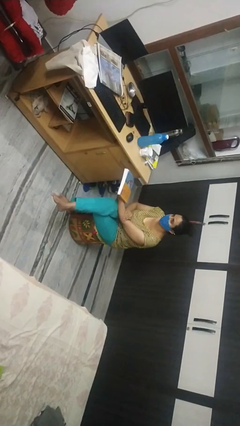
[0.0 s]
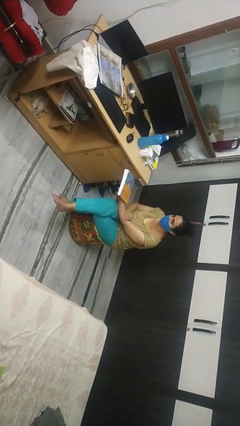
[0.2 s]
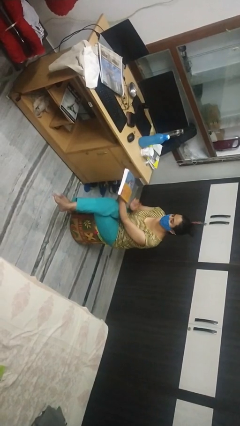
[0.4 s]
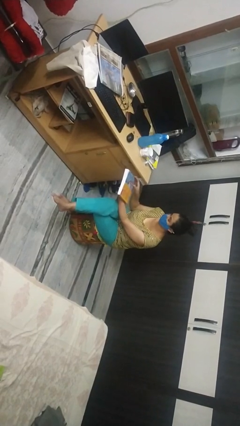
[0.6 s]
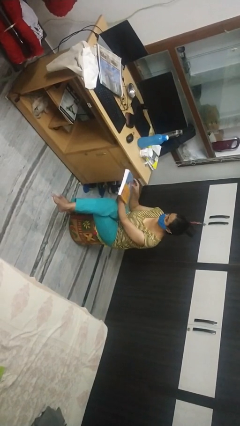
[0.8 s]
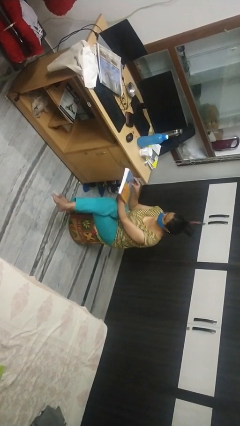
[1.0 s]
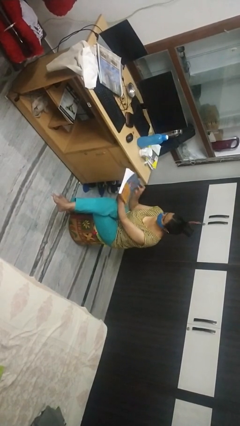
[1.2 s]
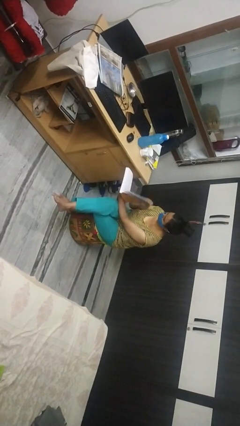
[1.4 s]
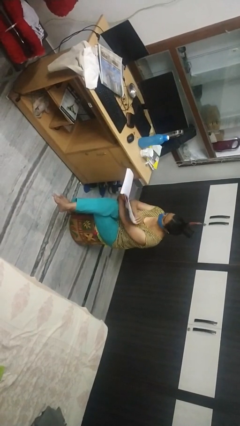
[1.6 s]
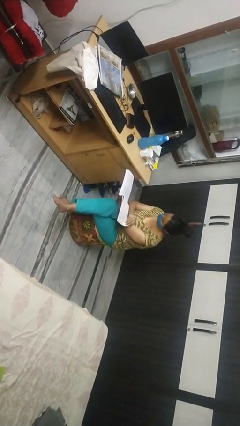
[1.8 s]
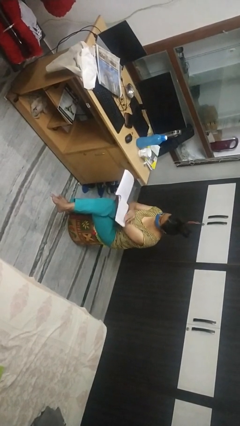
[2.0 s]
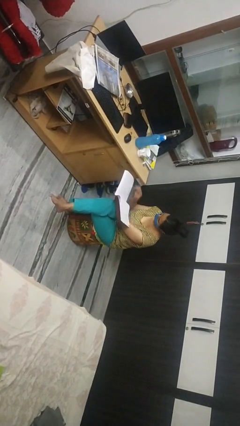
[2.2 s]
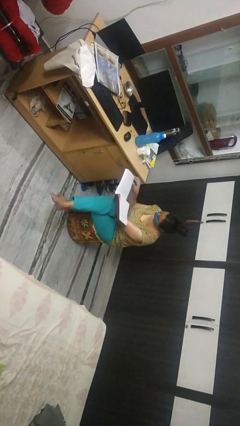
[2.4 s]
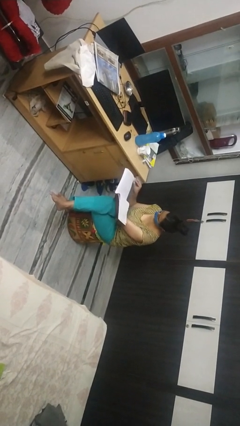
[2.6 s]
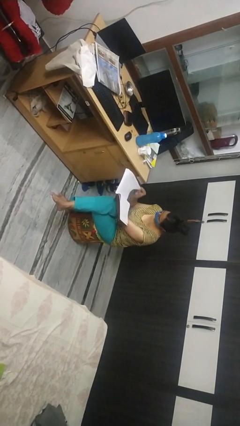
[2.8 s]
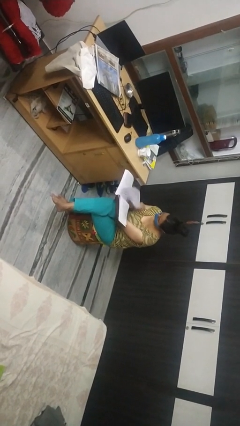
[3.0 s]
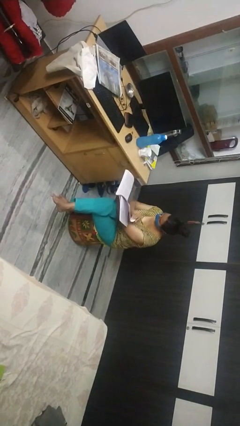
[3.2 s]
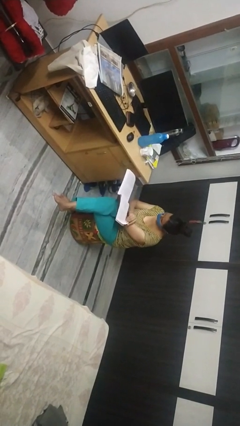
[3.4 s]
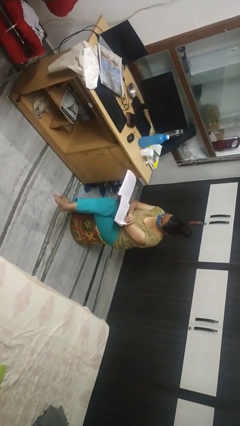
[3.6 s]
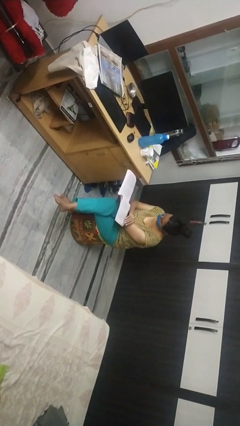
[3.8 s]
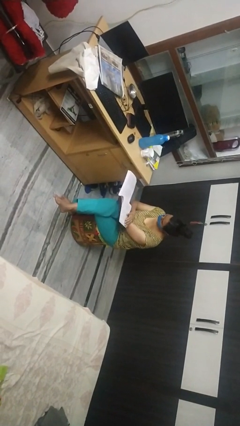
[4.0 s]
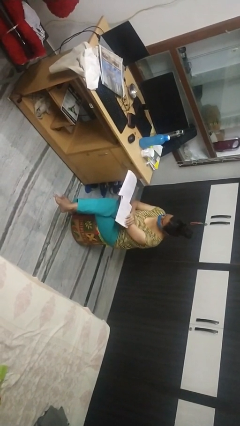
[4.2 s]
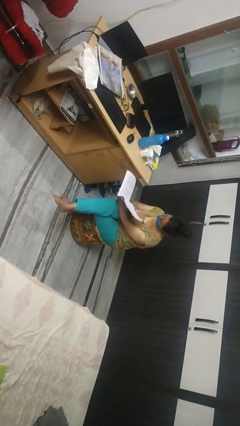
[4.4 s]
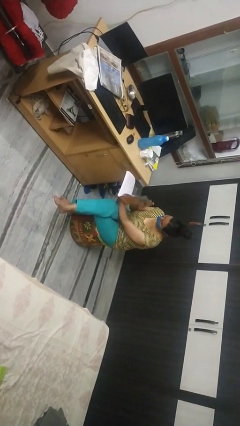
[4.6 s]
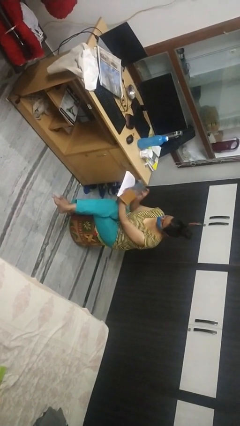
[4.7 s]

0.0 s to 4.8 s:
person reads book

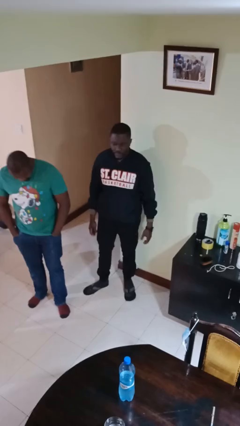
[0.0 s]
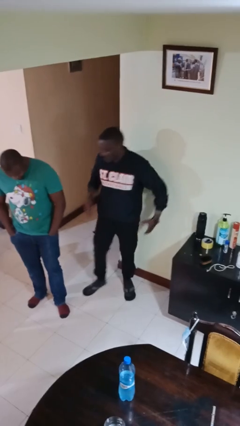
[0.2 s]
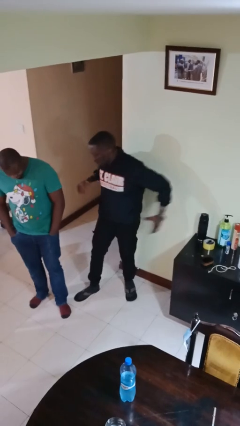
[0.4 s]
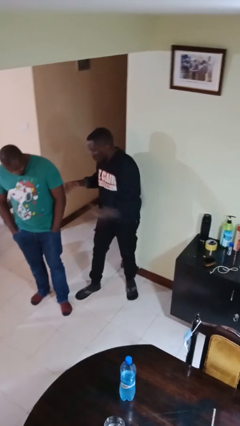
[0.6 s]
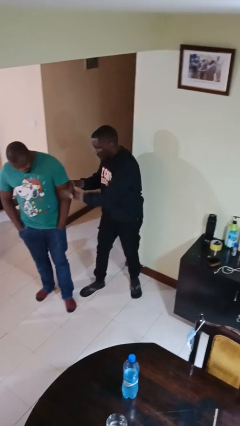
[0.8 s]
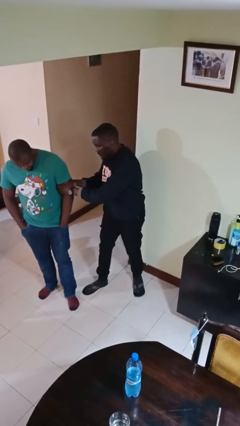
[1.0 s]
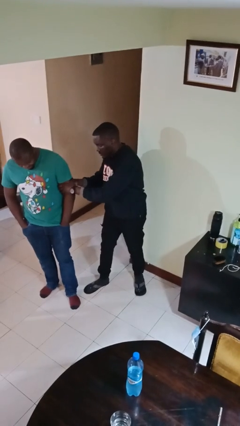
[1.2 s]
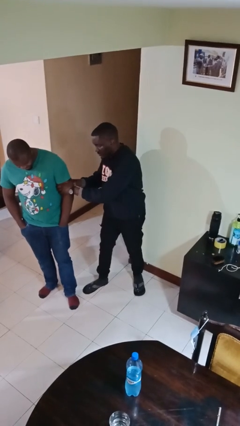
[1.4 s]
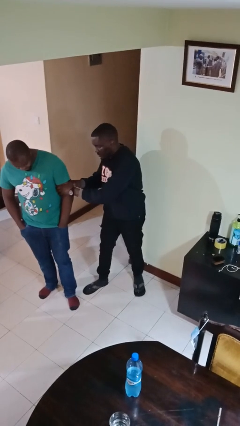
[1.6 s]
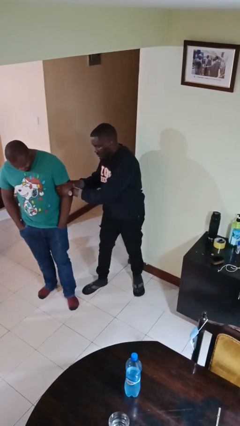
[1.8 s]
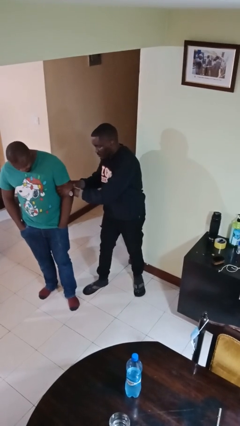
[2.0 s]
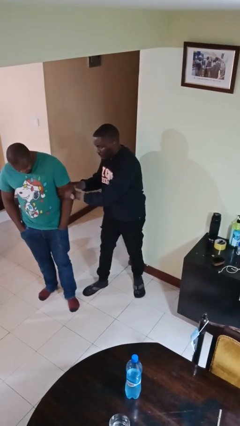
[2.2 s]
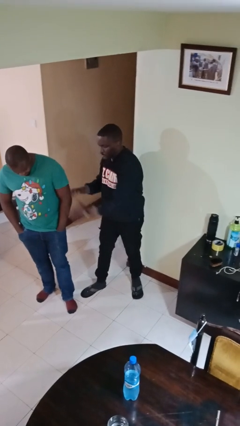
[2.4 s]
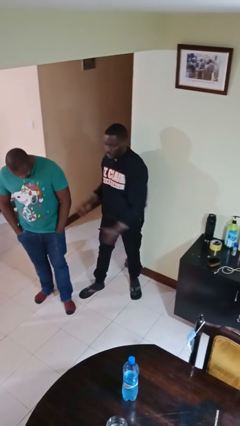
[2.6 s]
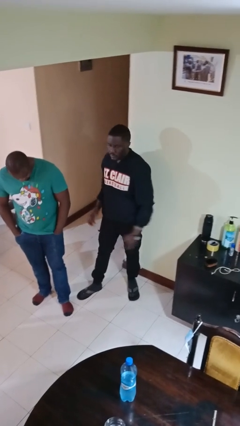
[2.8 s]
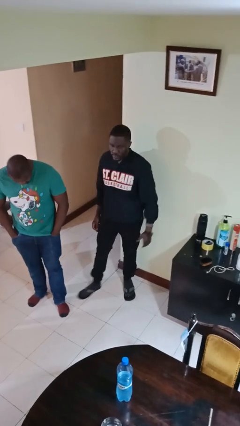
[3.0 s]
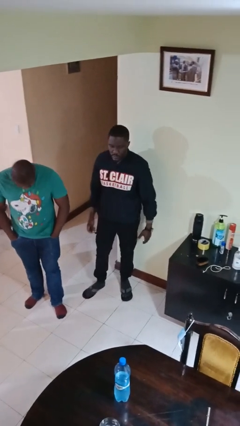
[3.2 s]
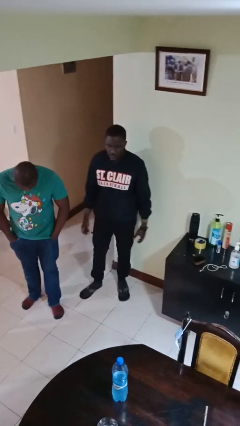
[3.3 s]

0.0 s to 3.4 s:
person grabs person by bicep

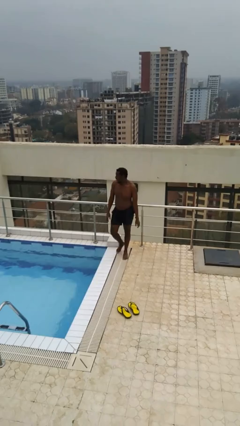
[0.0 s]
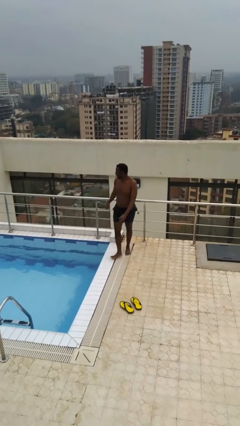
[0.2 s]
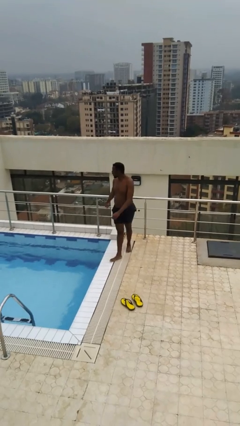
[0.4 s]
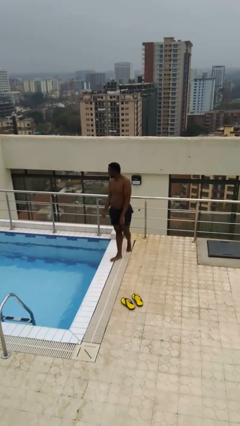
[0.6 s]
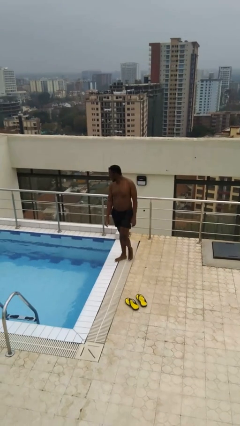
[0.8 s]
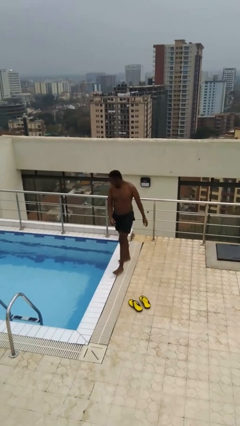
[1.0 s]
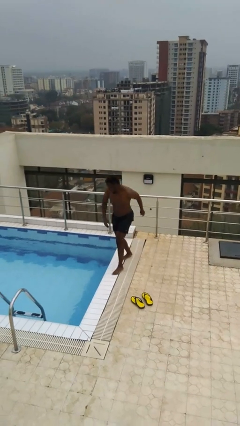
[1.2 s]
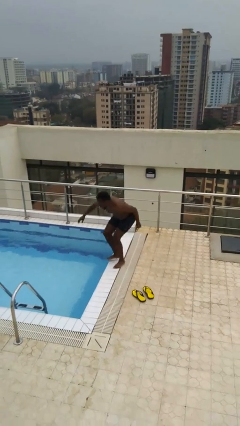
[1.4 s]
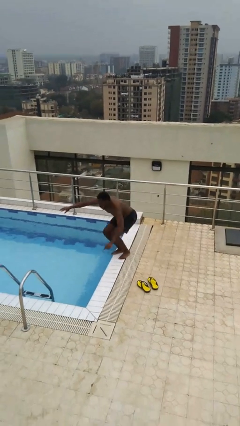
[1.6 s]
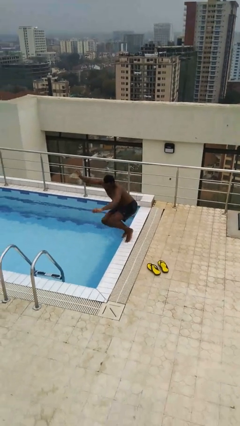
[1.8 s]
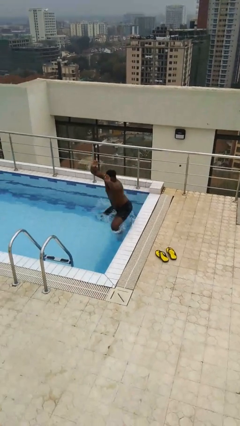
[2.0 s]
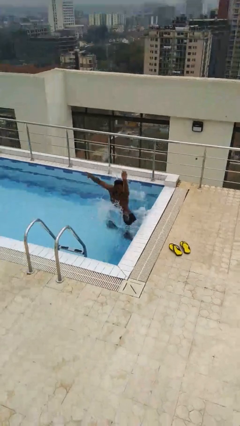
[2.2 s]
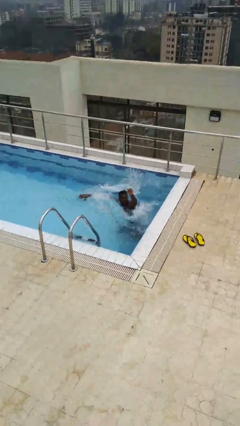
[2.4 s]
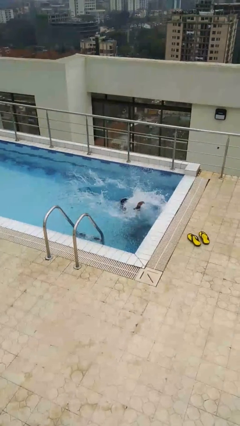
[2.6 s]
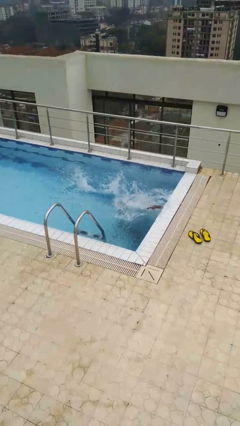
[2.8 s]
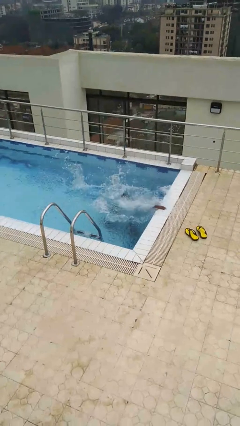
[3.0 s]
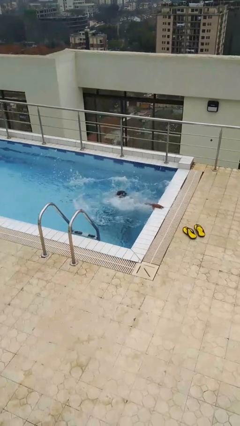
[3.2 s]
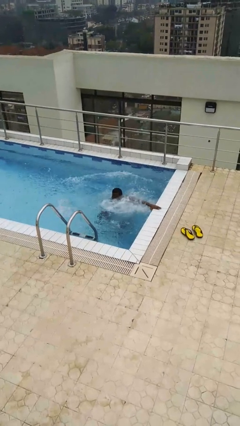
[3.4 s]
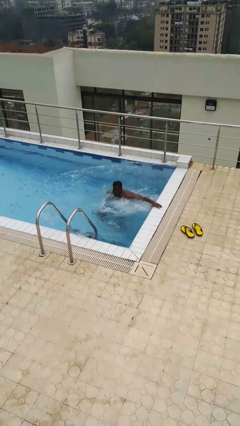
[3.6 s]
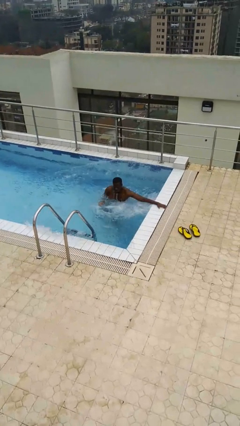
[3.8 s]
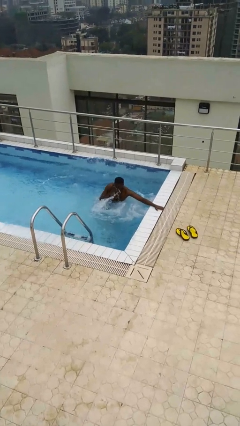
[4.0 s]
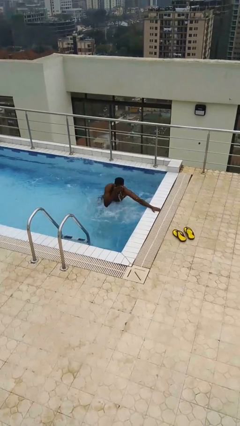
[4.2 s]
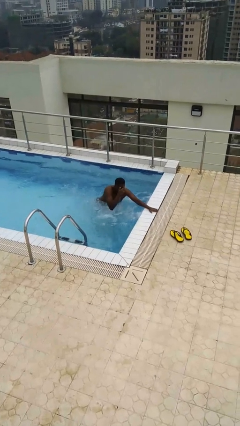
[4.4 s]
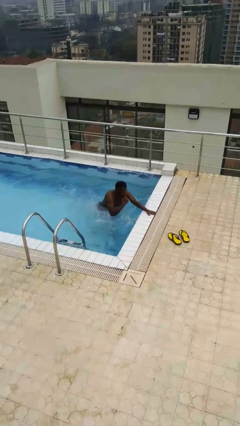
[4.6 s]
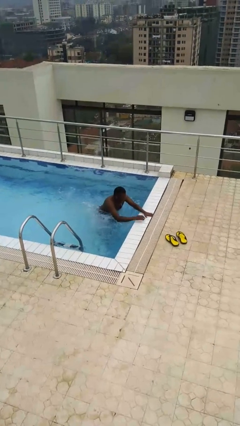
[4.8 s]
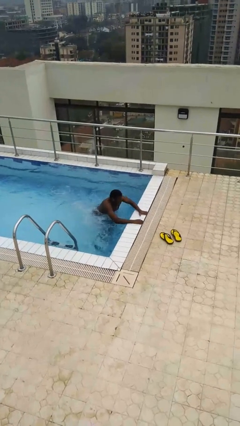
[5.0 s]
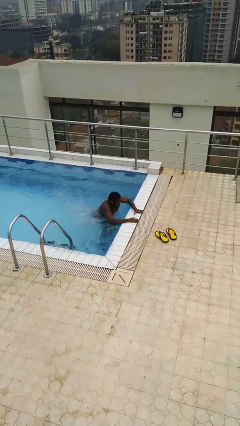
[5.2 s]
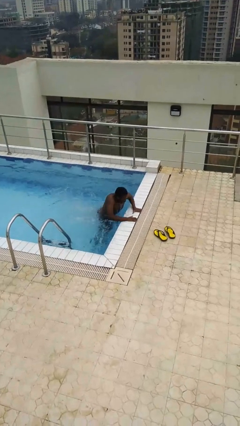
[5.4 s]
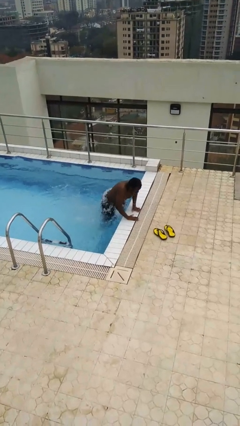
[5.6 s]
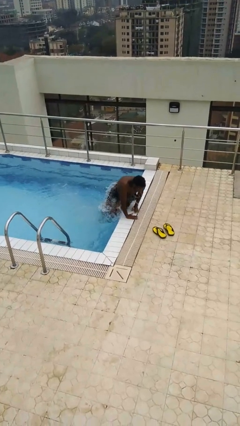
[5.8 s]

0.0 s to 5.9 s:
person falls into pool

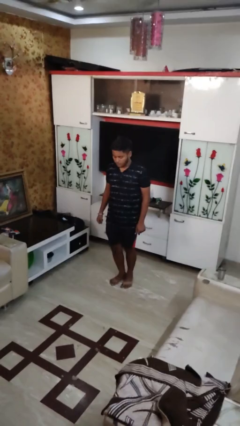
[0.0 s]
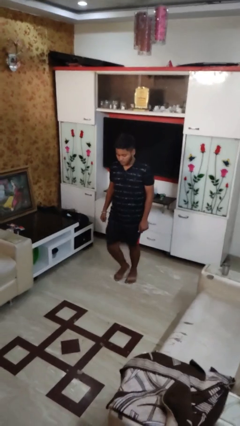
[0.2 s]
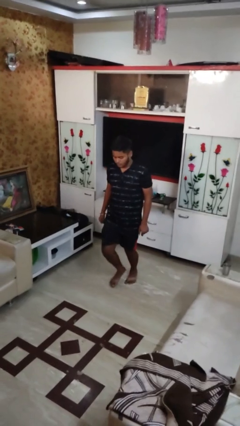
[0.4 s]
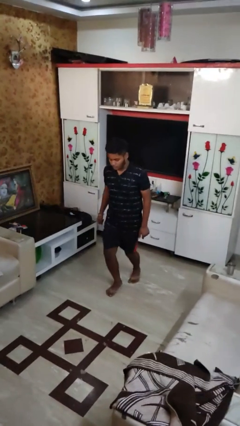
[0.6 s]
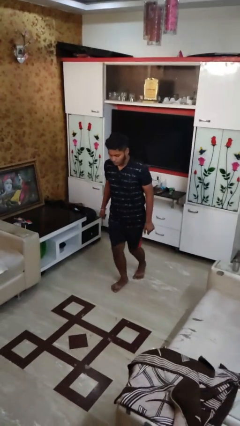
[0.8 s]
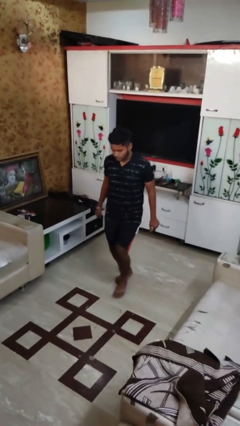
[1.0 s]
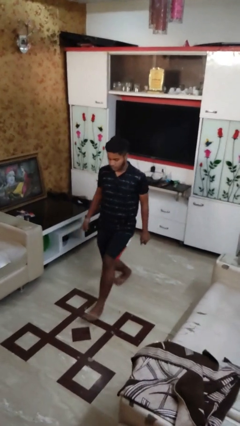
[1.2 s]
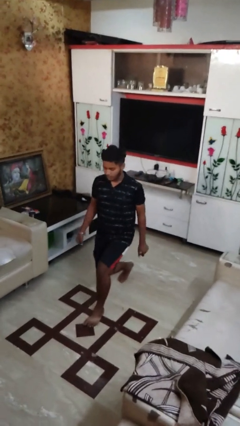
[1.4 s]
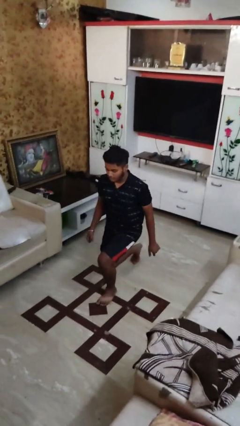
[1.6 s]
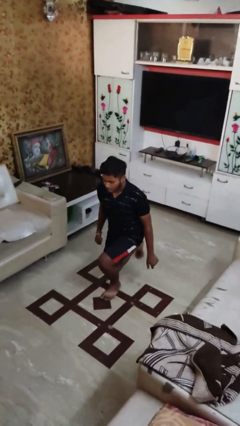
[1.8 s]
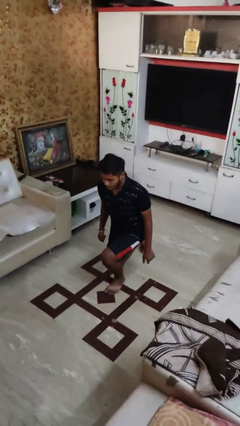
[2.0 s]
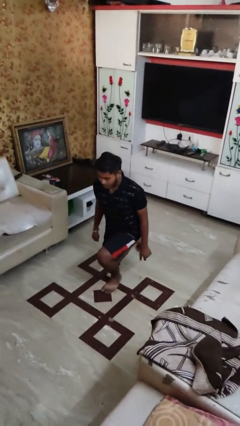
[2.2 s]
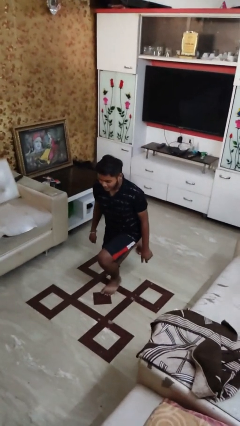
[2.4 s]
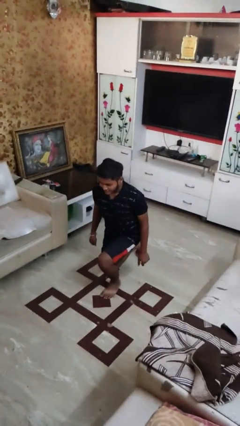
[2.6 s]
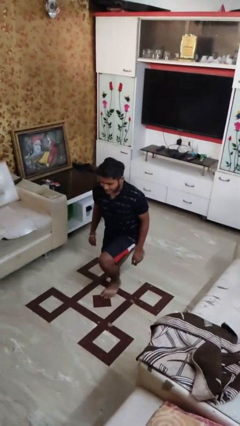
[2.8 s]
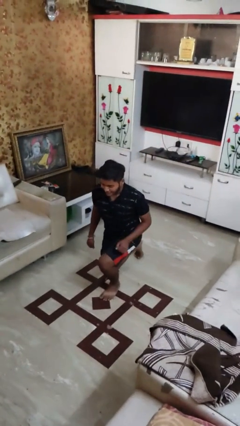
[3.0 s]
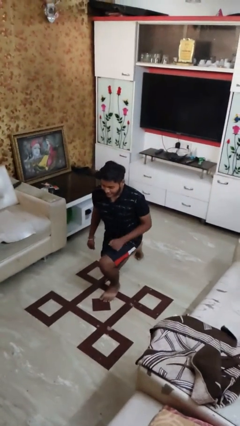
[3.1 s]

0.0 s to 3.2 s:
person exercises with lunges

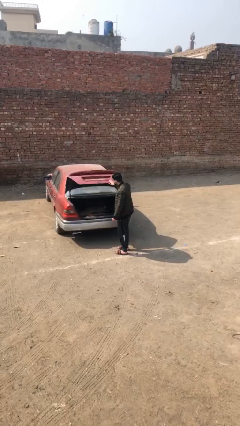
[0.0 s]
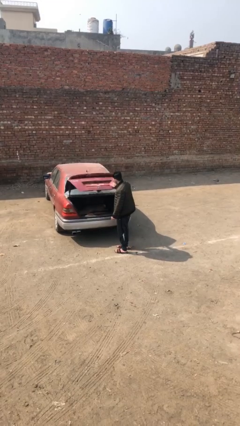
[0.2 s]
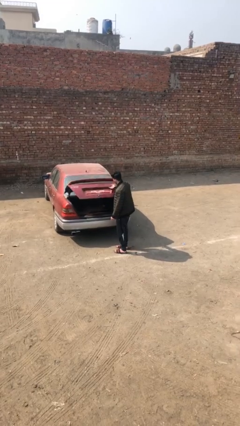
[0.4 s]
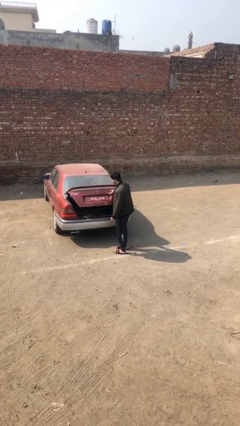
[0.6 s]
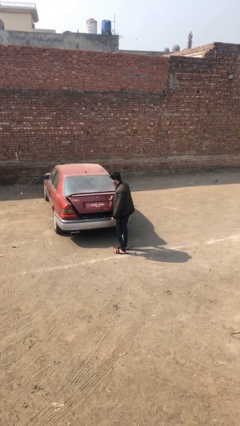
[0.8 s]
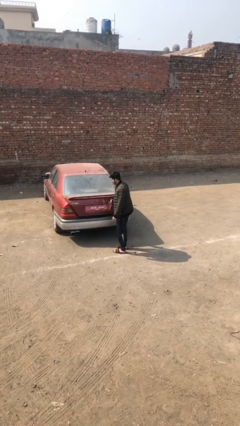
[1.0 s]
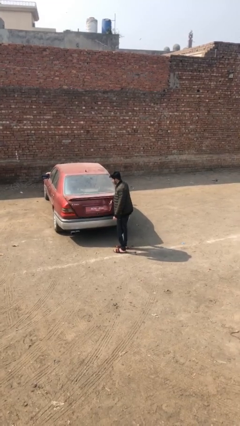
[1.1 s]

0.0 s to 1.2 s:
person closes car trunk
